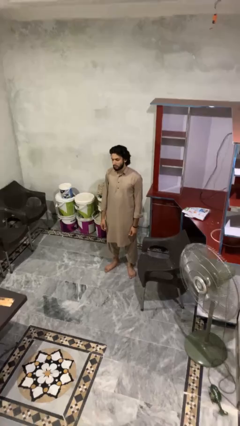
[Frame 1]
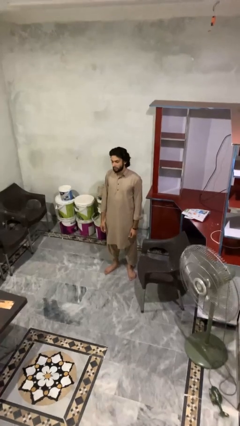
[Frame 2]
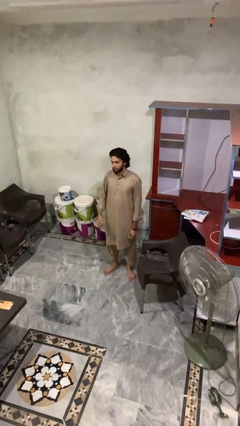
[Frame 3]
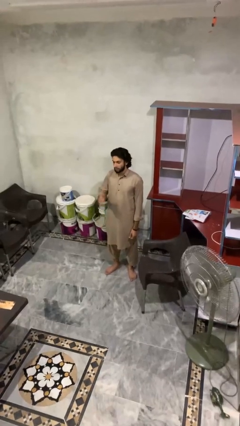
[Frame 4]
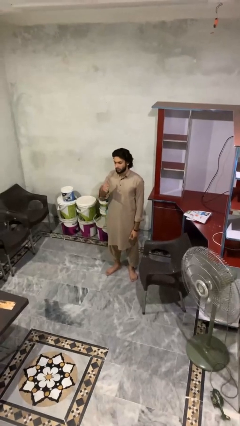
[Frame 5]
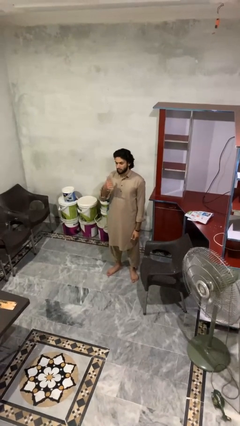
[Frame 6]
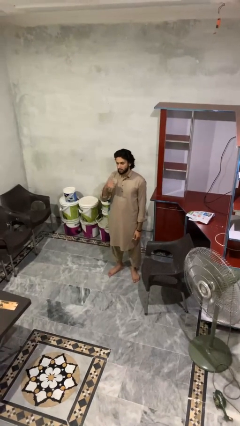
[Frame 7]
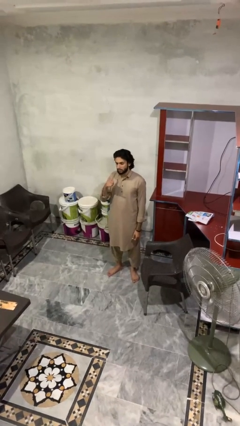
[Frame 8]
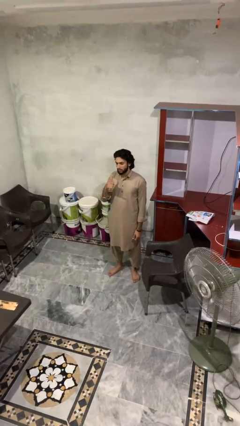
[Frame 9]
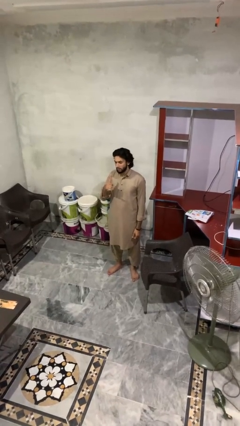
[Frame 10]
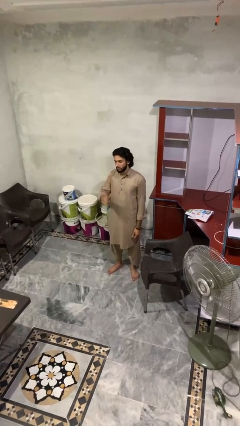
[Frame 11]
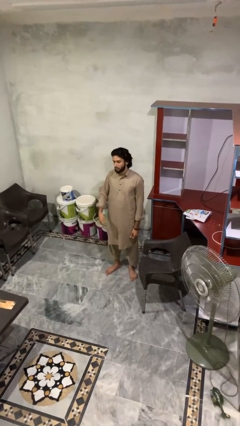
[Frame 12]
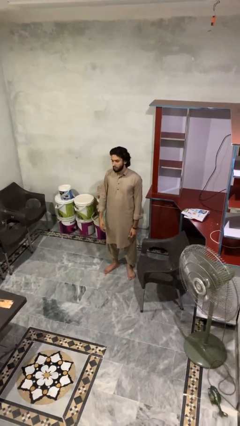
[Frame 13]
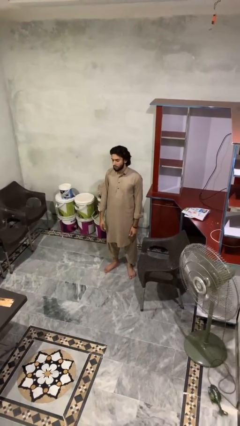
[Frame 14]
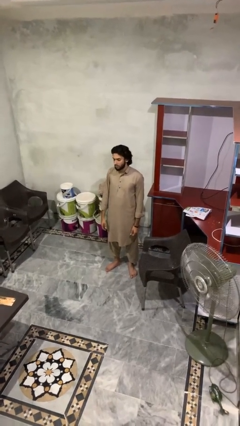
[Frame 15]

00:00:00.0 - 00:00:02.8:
person gestures hang loose

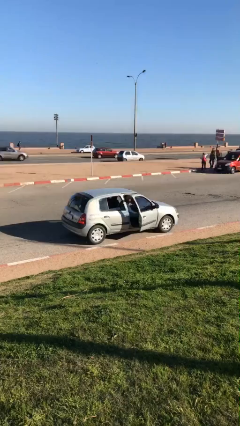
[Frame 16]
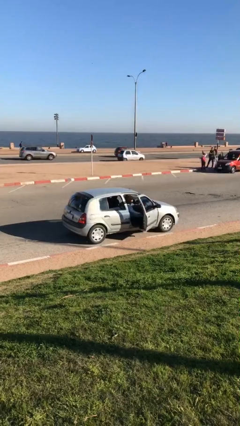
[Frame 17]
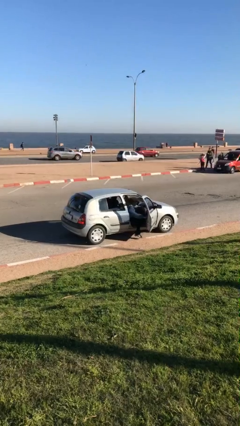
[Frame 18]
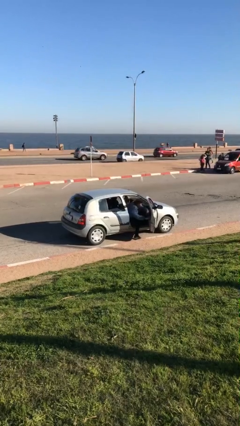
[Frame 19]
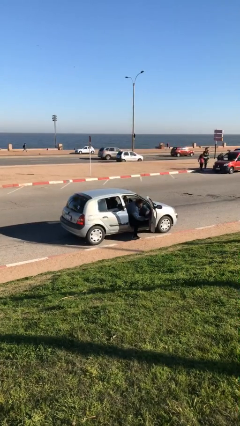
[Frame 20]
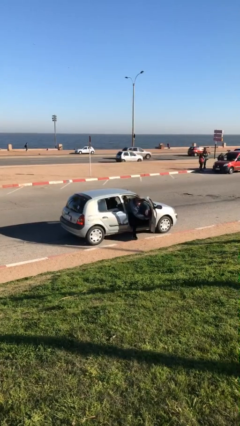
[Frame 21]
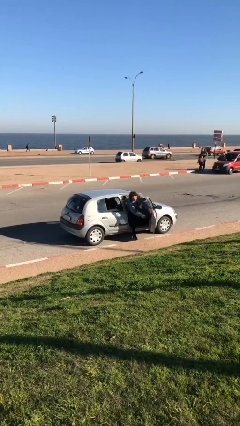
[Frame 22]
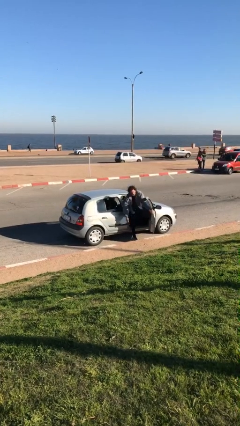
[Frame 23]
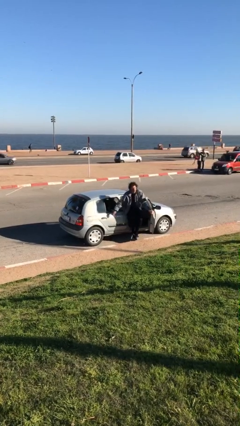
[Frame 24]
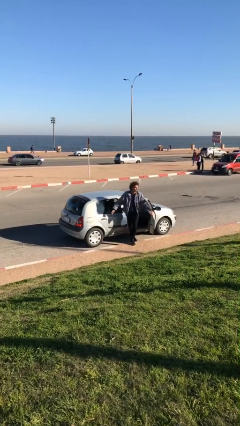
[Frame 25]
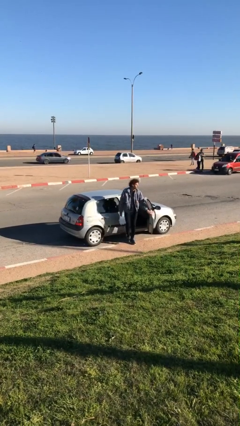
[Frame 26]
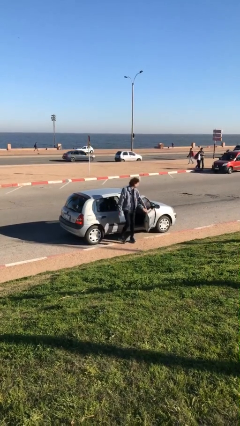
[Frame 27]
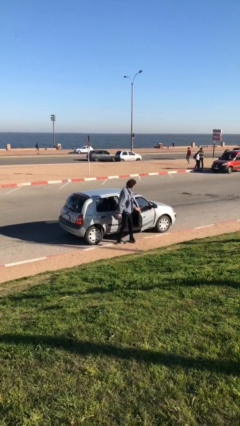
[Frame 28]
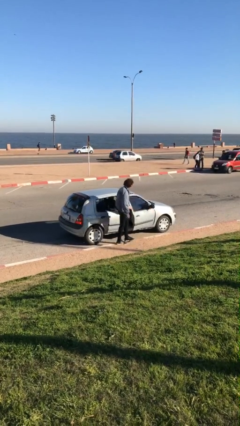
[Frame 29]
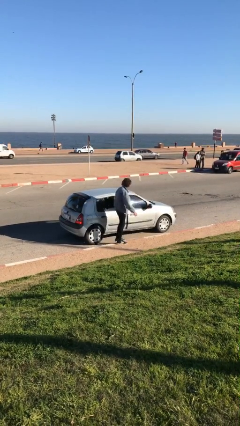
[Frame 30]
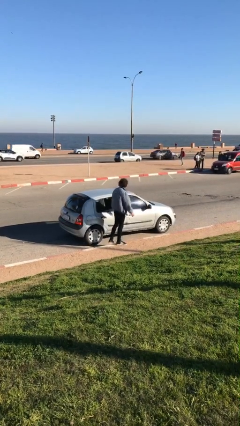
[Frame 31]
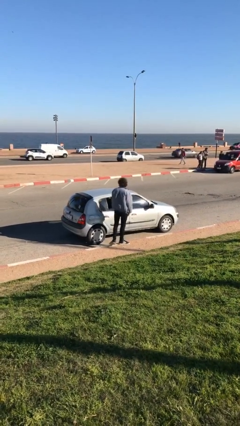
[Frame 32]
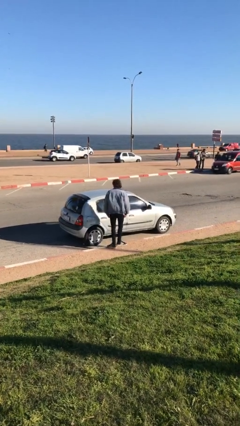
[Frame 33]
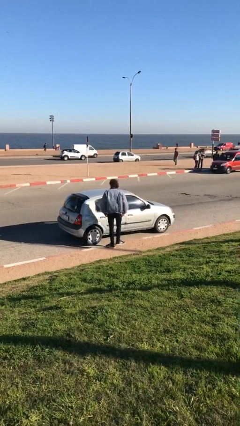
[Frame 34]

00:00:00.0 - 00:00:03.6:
car drops off person

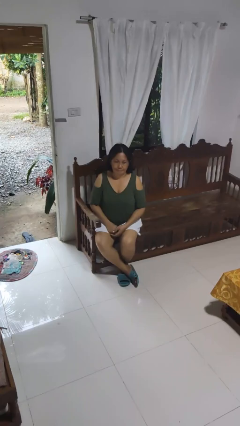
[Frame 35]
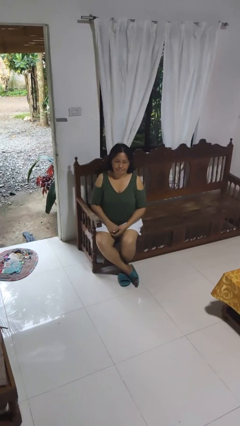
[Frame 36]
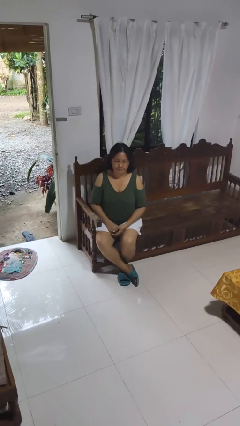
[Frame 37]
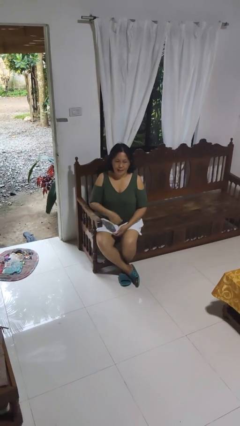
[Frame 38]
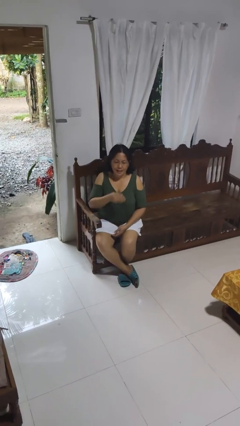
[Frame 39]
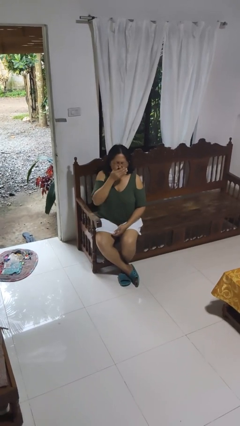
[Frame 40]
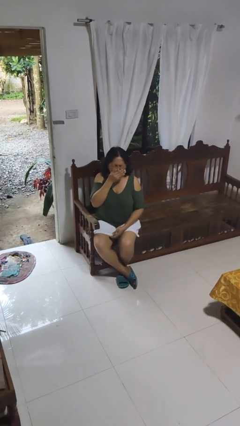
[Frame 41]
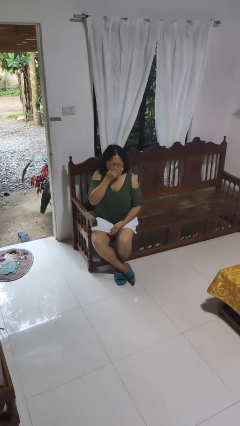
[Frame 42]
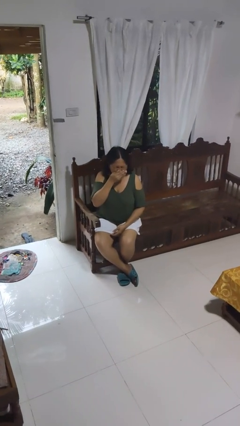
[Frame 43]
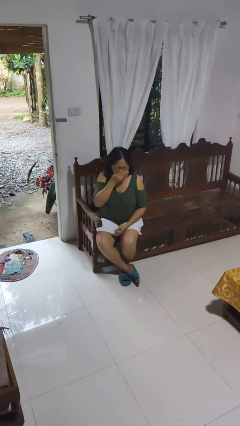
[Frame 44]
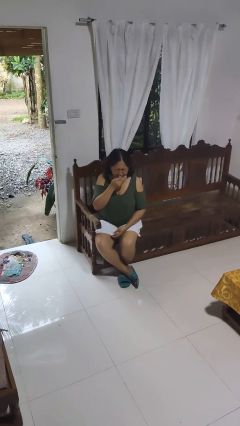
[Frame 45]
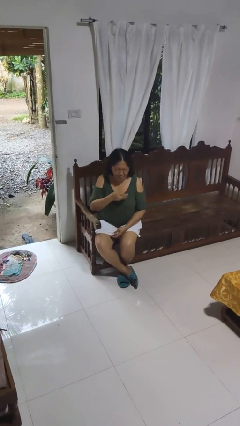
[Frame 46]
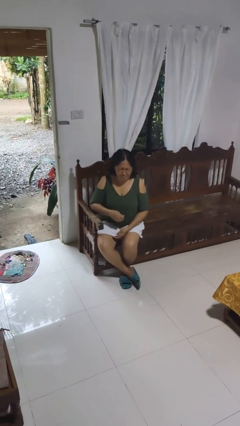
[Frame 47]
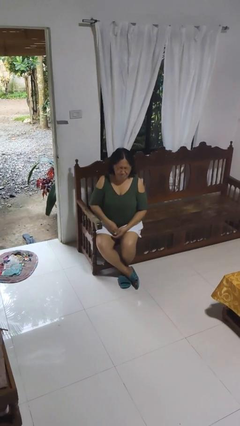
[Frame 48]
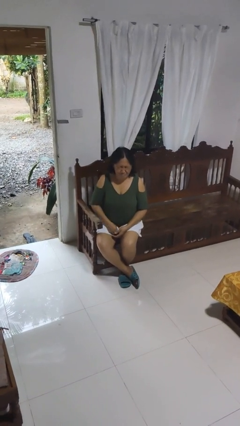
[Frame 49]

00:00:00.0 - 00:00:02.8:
person sneezes into hand

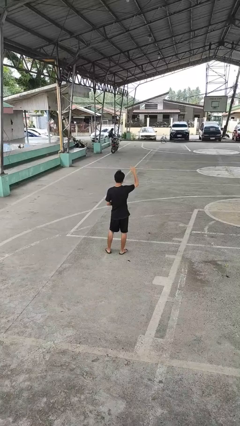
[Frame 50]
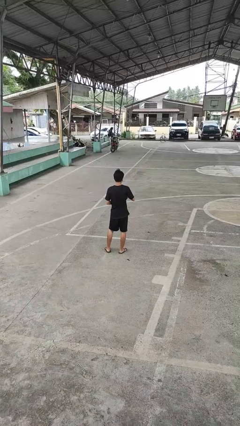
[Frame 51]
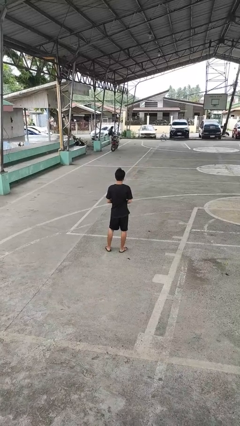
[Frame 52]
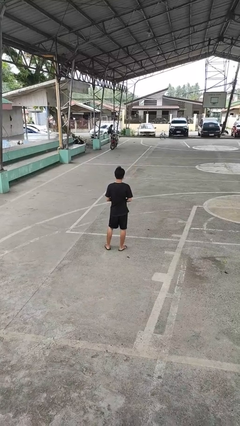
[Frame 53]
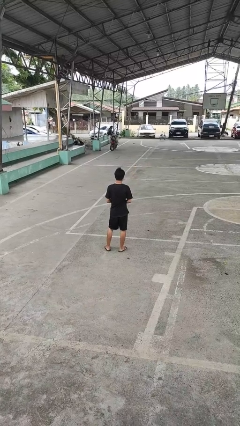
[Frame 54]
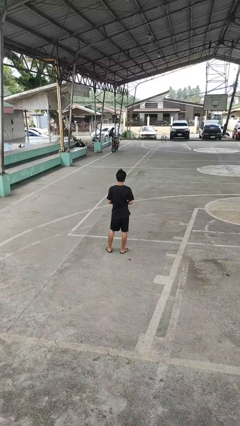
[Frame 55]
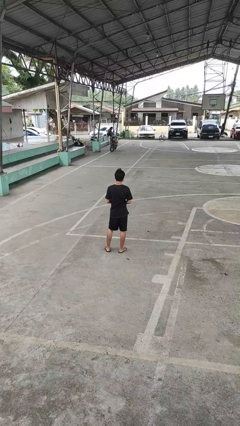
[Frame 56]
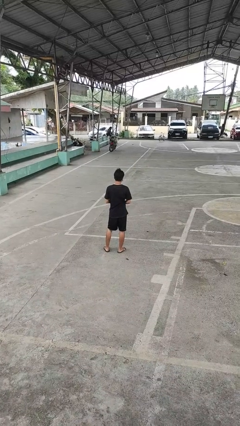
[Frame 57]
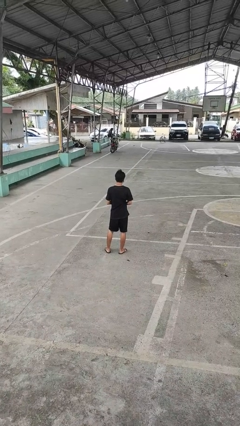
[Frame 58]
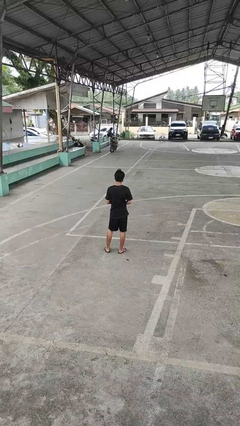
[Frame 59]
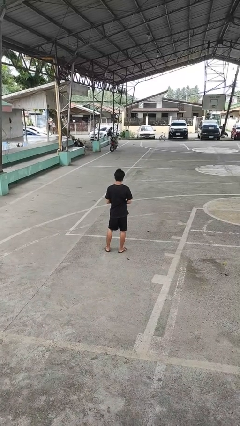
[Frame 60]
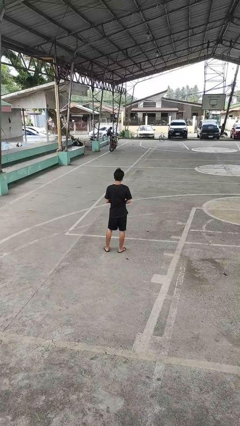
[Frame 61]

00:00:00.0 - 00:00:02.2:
person gestures lower hand

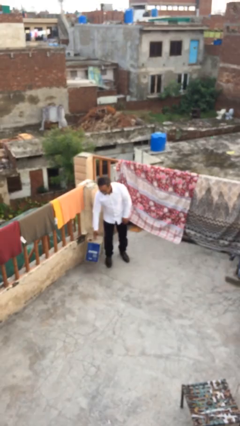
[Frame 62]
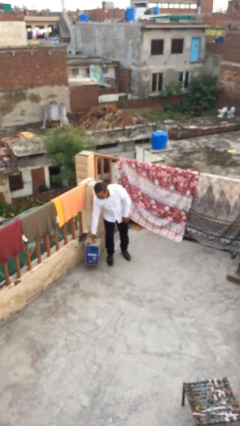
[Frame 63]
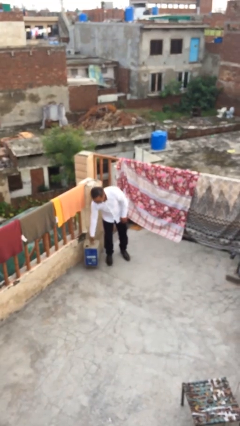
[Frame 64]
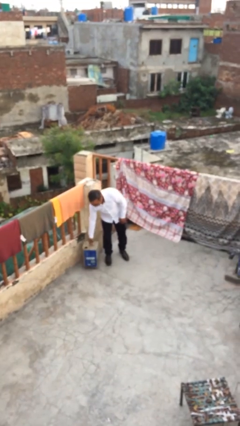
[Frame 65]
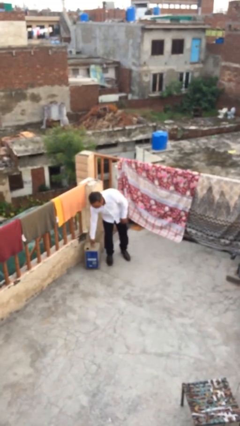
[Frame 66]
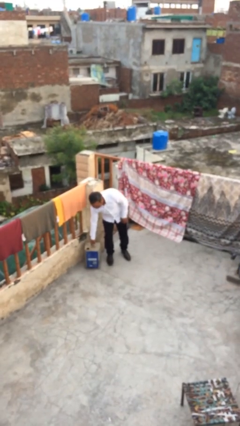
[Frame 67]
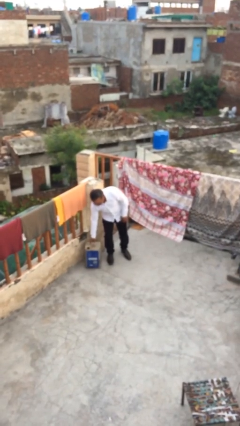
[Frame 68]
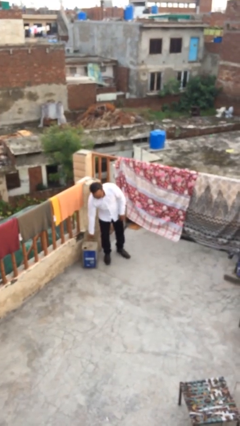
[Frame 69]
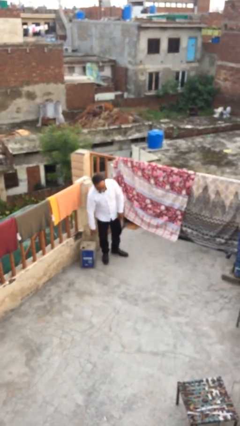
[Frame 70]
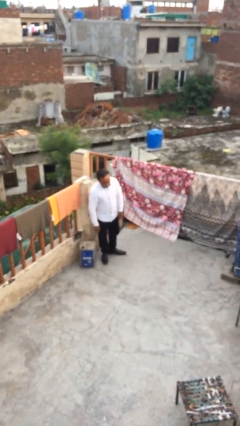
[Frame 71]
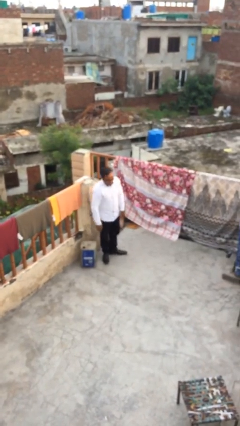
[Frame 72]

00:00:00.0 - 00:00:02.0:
person puts down object on floor

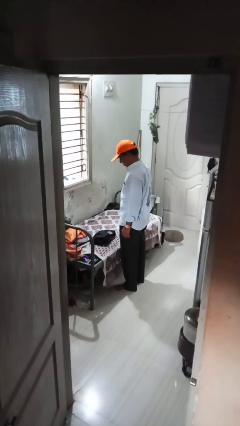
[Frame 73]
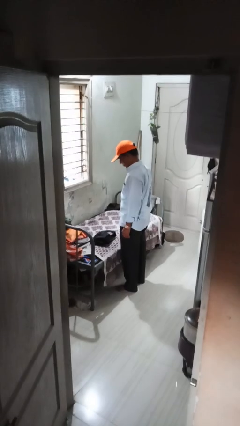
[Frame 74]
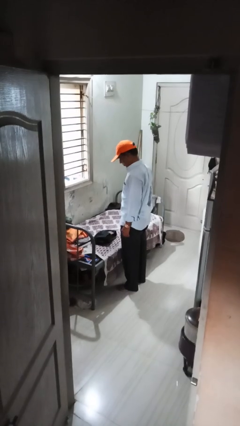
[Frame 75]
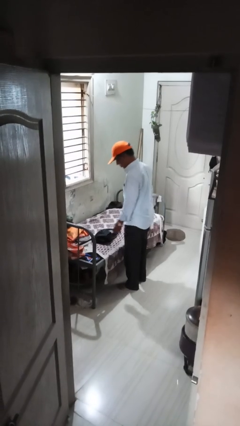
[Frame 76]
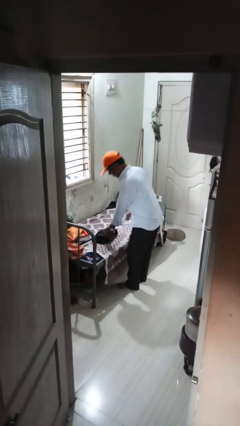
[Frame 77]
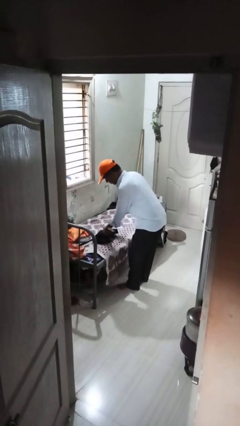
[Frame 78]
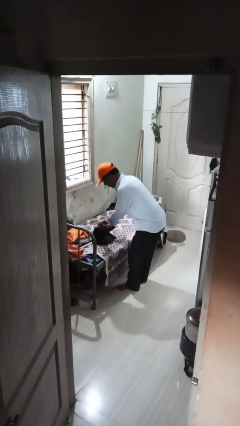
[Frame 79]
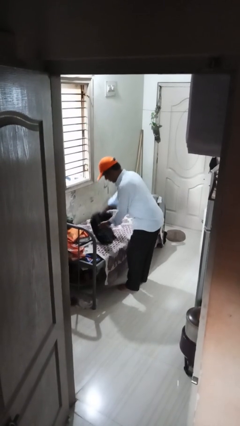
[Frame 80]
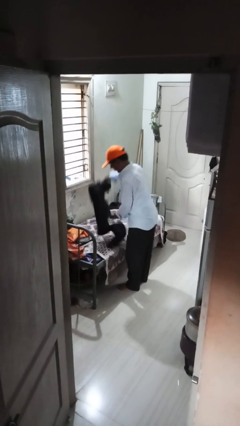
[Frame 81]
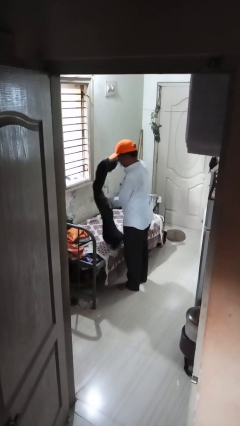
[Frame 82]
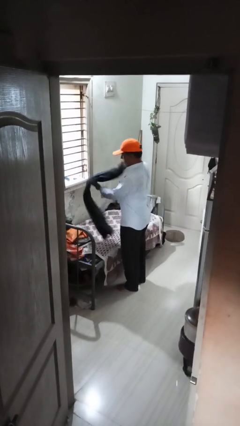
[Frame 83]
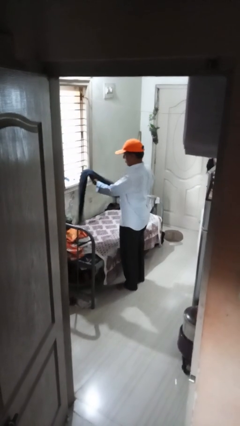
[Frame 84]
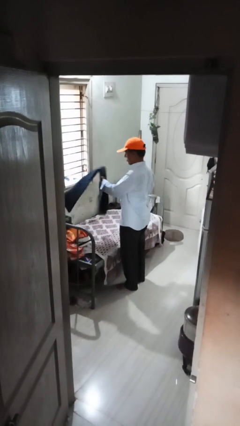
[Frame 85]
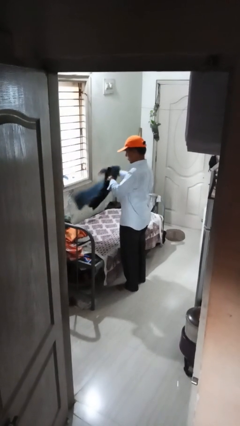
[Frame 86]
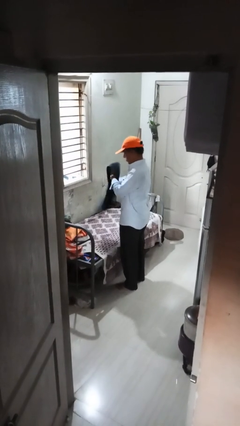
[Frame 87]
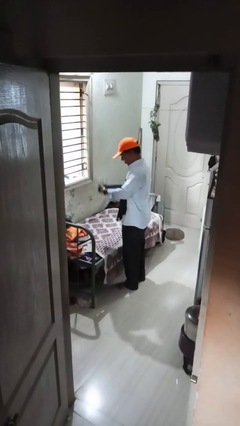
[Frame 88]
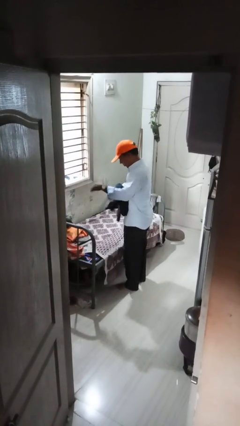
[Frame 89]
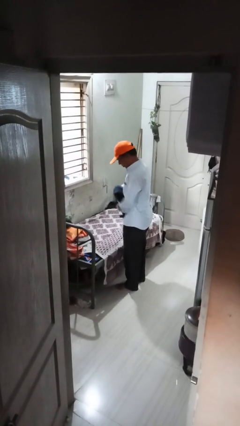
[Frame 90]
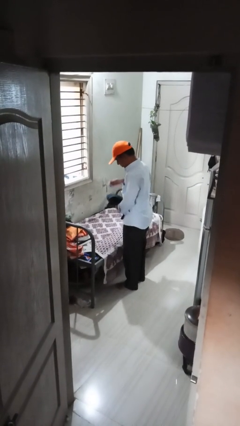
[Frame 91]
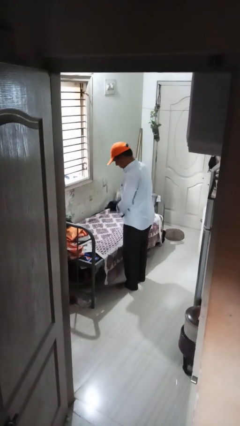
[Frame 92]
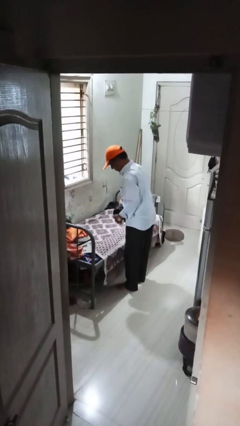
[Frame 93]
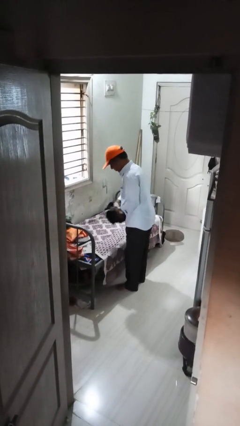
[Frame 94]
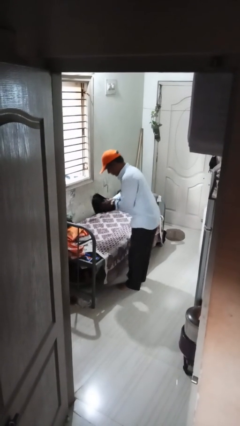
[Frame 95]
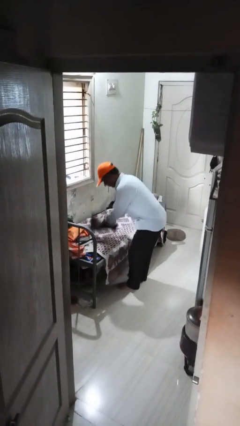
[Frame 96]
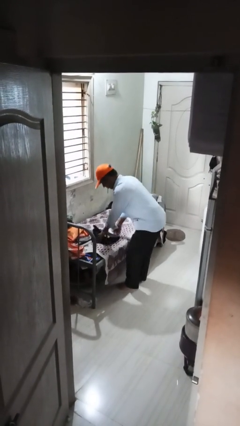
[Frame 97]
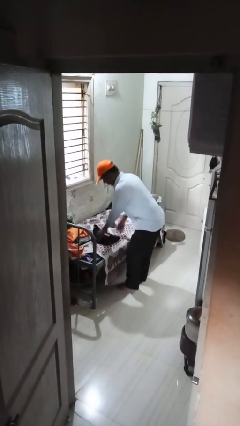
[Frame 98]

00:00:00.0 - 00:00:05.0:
person folds pants
